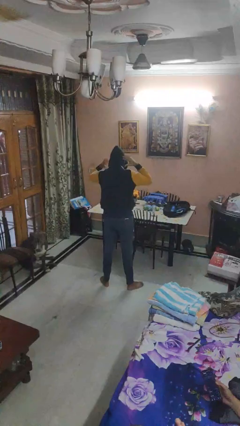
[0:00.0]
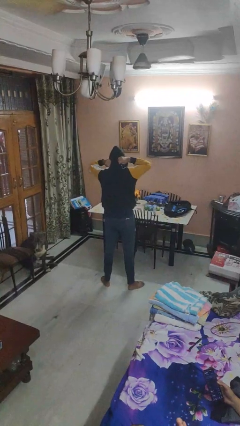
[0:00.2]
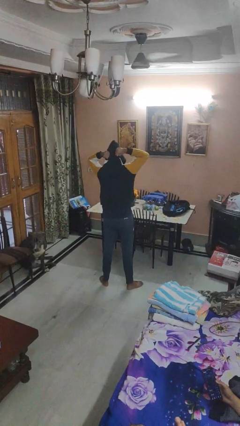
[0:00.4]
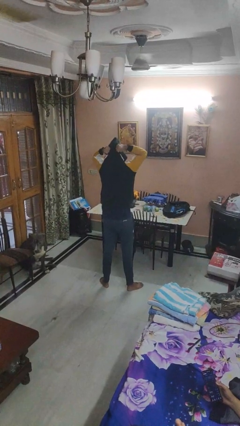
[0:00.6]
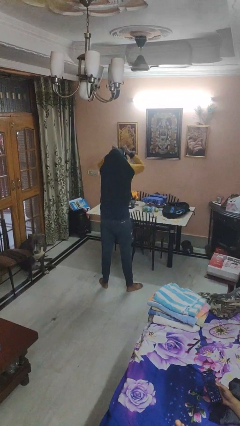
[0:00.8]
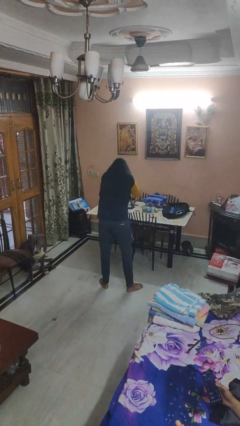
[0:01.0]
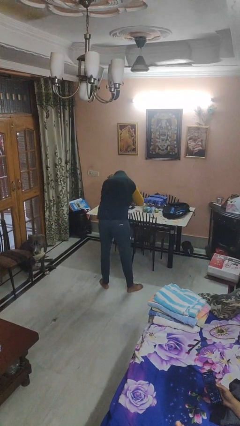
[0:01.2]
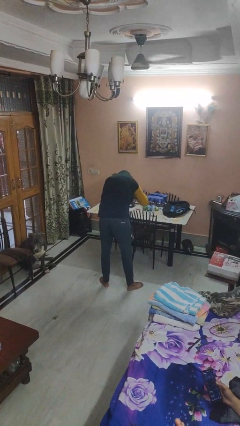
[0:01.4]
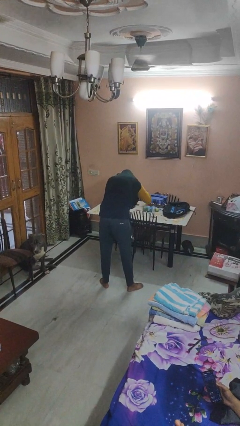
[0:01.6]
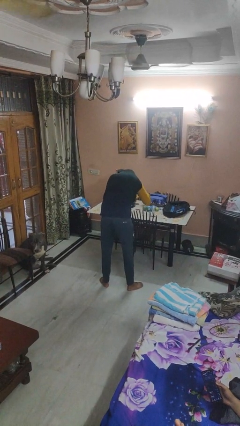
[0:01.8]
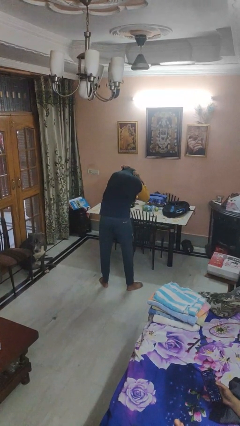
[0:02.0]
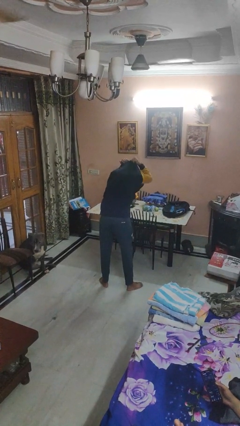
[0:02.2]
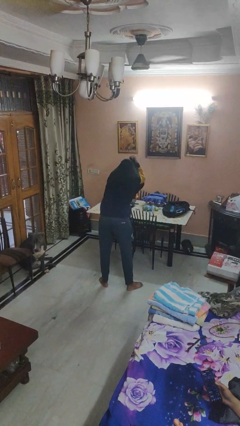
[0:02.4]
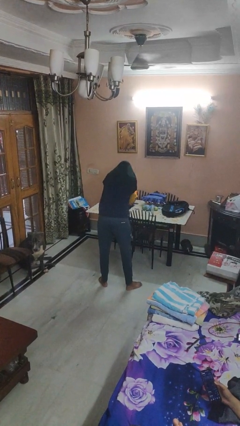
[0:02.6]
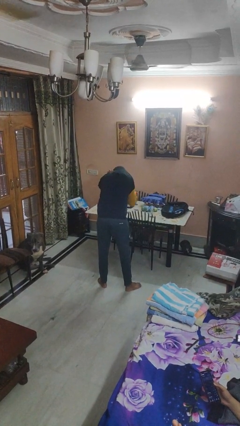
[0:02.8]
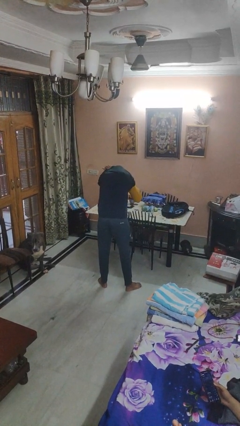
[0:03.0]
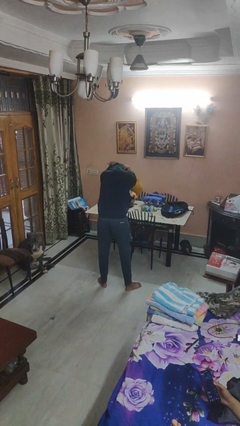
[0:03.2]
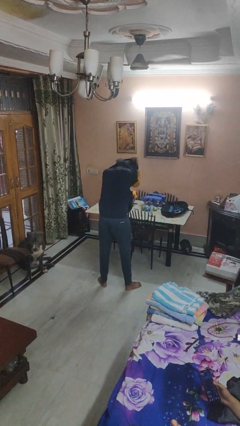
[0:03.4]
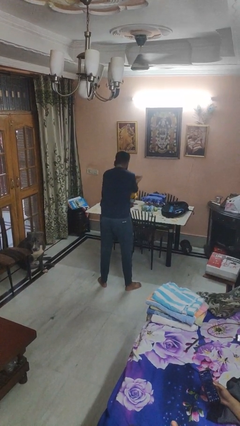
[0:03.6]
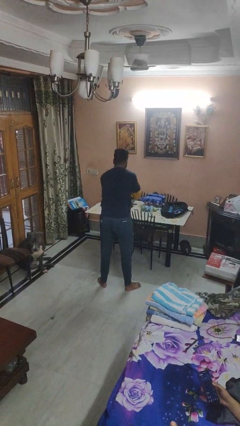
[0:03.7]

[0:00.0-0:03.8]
person takes off hoodie

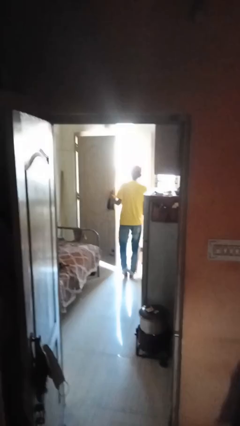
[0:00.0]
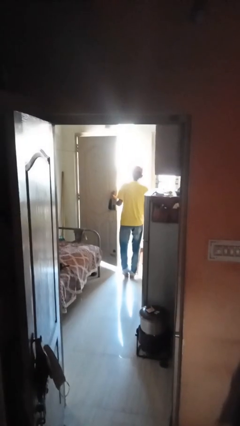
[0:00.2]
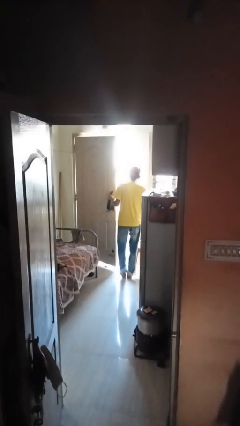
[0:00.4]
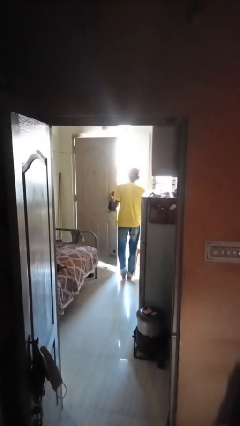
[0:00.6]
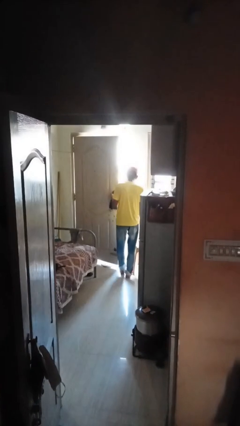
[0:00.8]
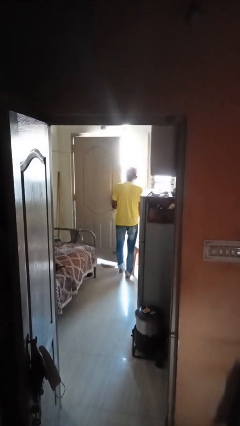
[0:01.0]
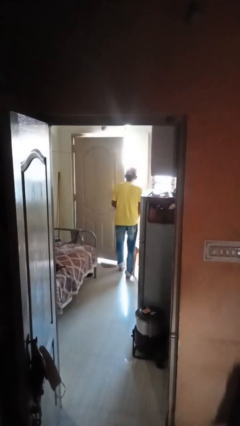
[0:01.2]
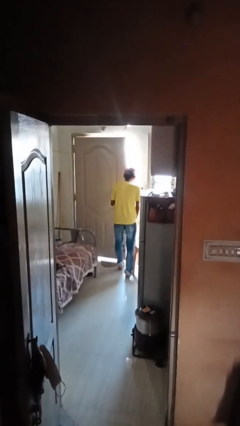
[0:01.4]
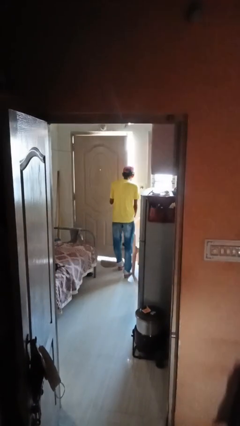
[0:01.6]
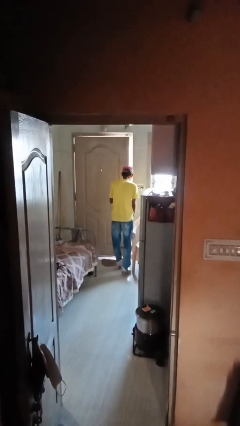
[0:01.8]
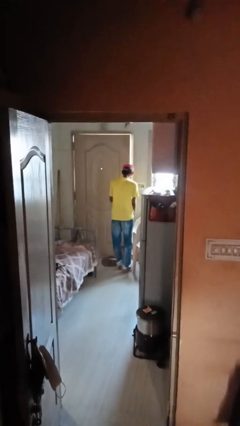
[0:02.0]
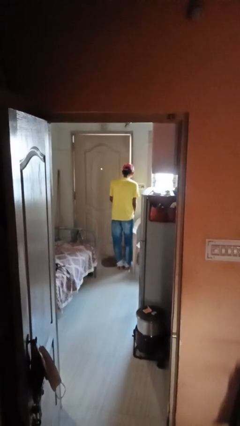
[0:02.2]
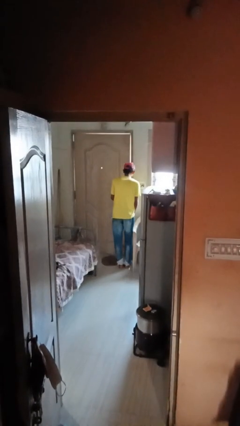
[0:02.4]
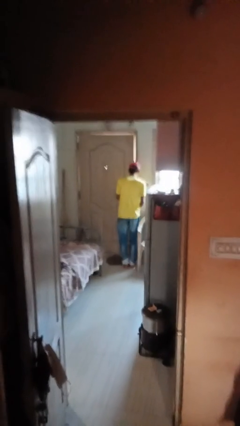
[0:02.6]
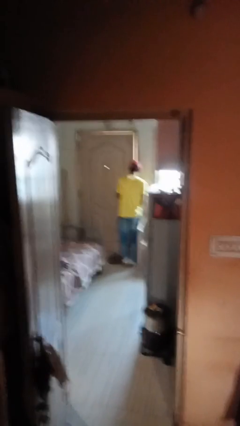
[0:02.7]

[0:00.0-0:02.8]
person closes facility door

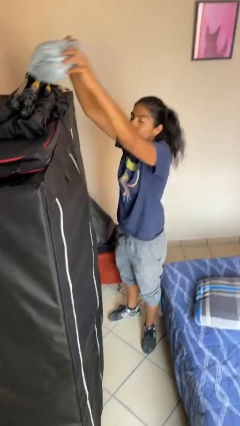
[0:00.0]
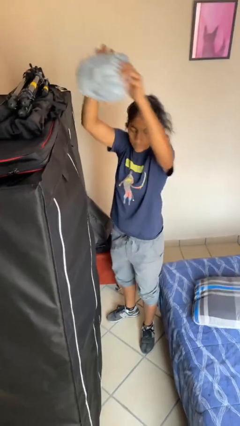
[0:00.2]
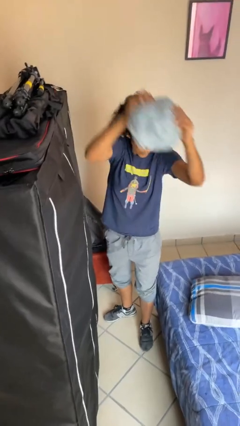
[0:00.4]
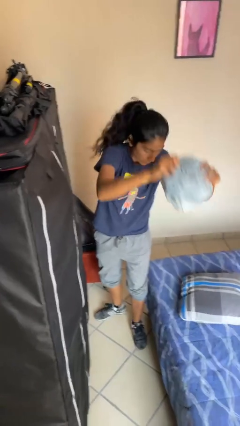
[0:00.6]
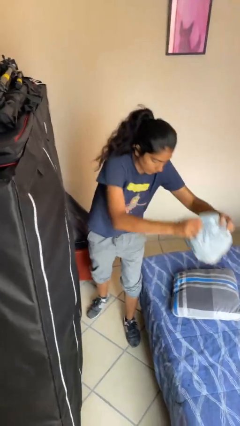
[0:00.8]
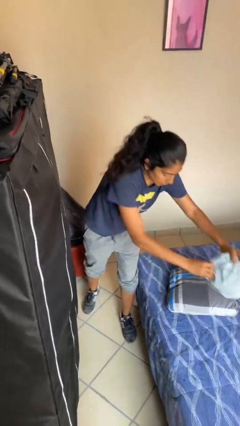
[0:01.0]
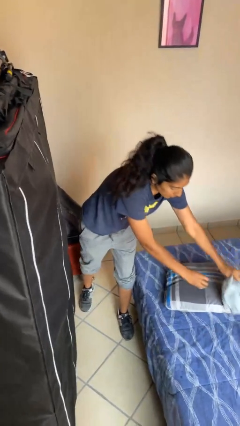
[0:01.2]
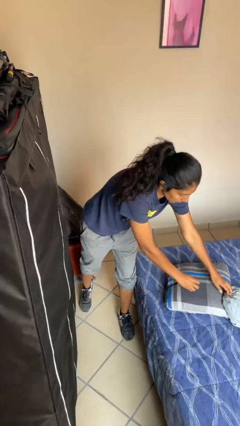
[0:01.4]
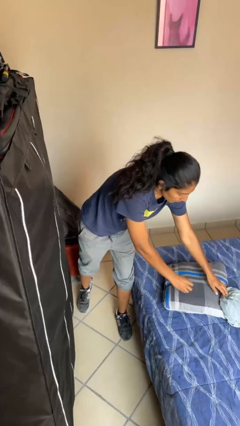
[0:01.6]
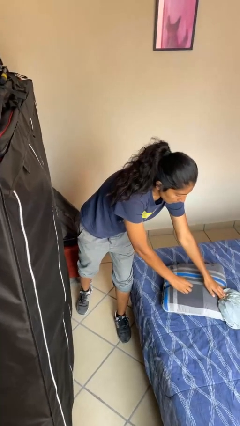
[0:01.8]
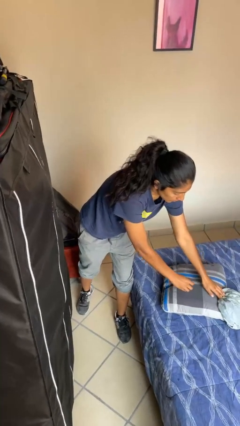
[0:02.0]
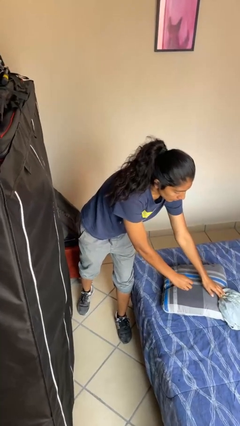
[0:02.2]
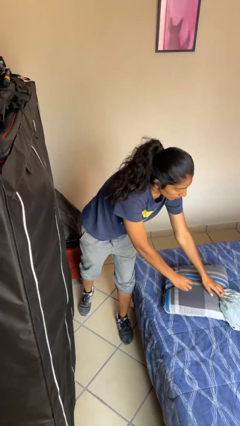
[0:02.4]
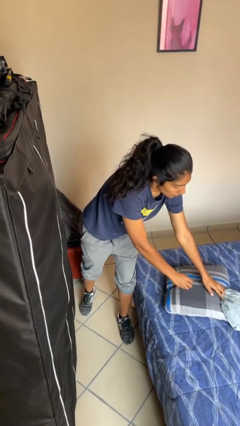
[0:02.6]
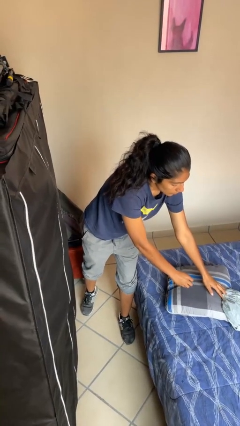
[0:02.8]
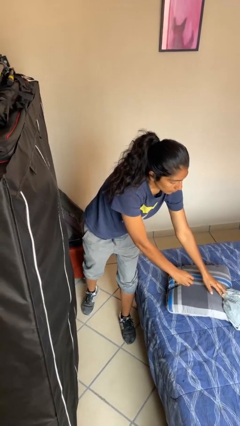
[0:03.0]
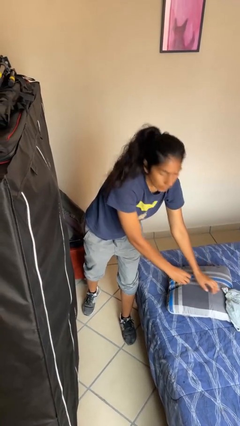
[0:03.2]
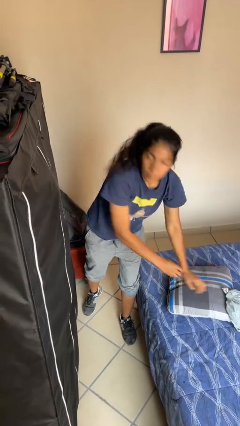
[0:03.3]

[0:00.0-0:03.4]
person puts down object on shelf

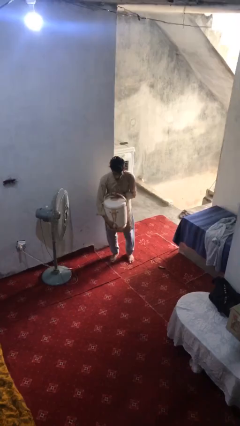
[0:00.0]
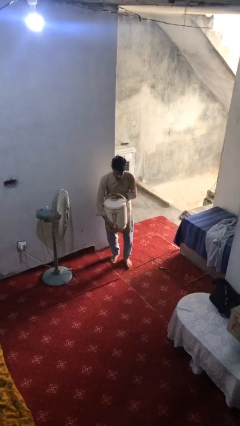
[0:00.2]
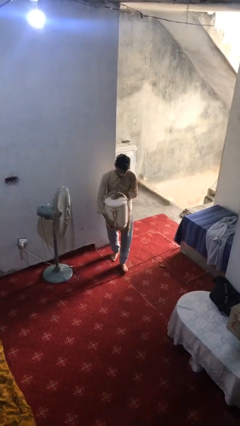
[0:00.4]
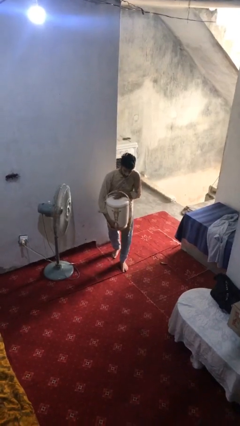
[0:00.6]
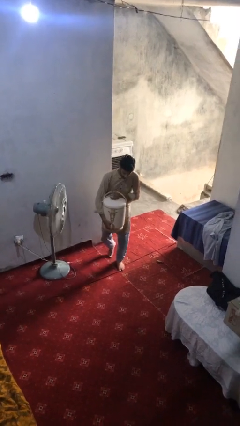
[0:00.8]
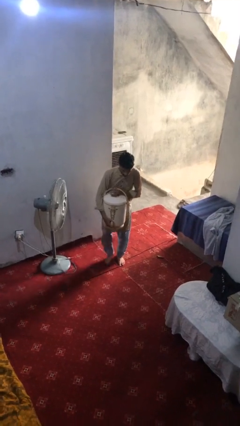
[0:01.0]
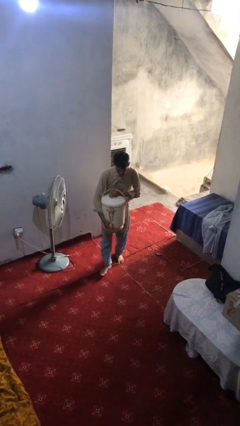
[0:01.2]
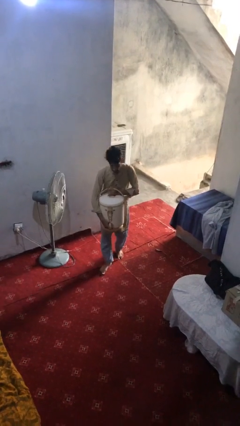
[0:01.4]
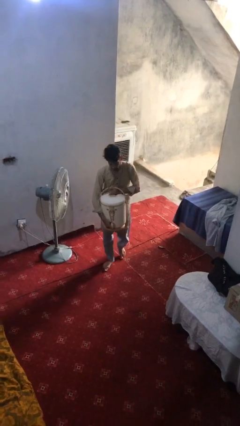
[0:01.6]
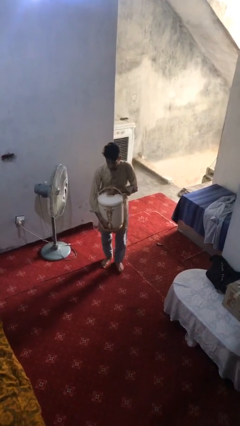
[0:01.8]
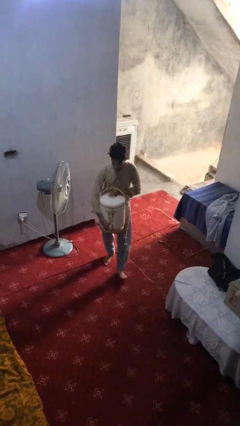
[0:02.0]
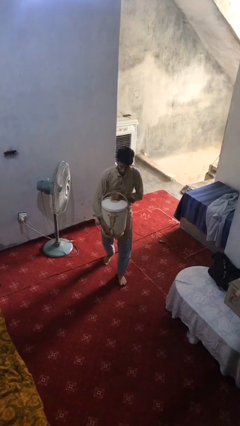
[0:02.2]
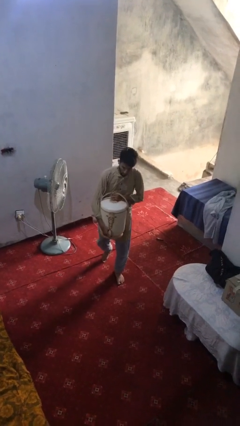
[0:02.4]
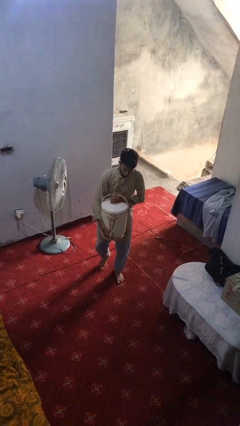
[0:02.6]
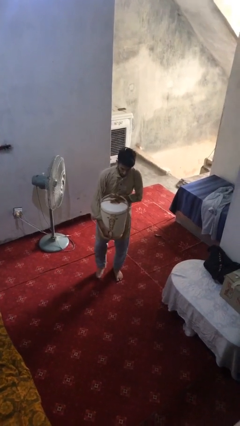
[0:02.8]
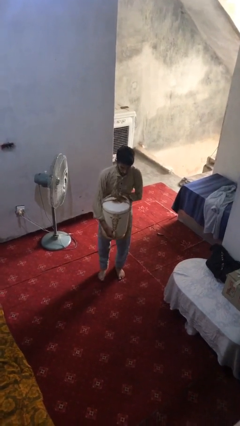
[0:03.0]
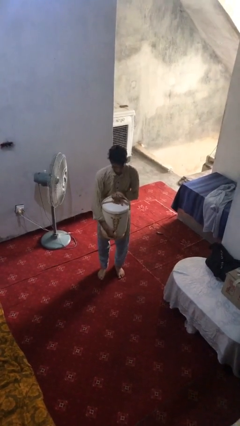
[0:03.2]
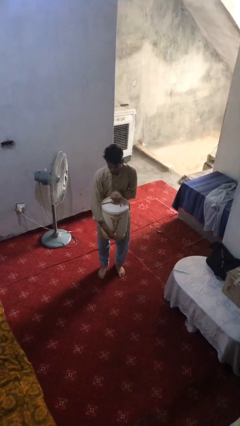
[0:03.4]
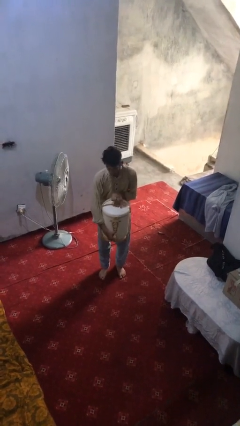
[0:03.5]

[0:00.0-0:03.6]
person carries heavy object

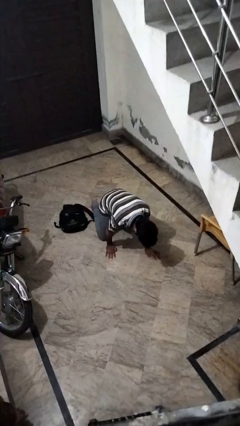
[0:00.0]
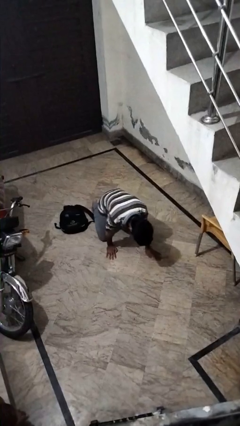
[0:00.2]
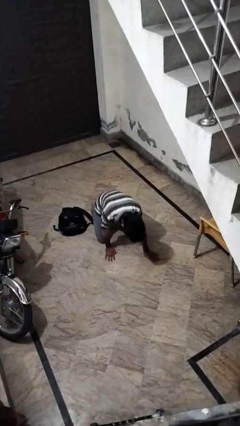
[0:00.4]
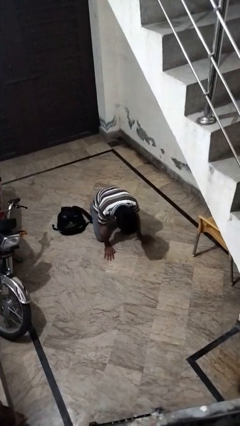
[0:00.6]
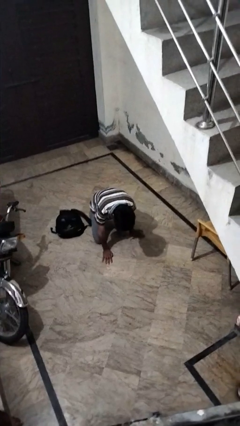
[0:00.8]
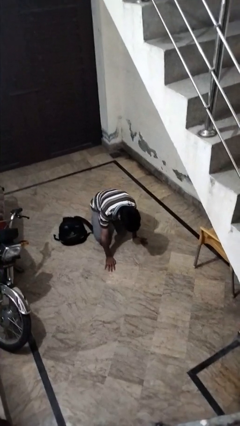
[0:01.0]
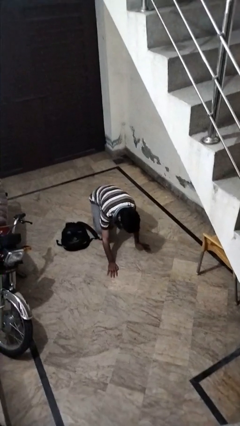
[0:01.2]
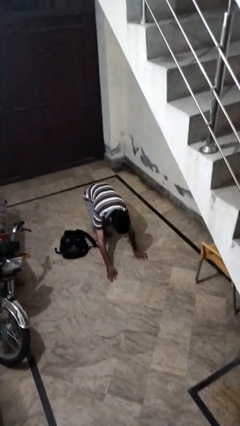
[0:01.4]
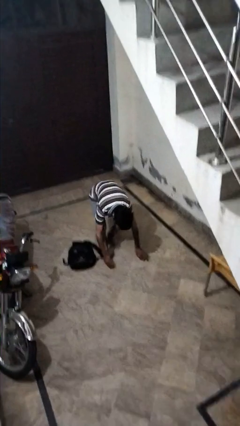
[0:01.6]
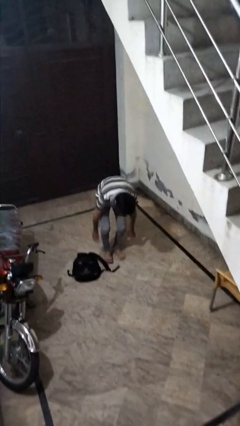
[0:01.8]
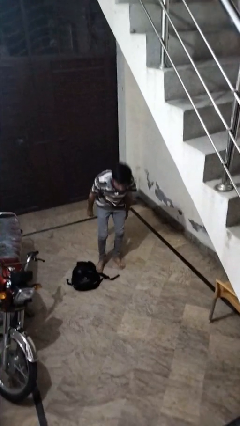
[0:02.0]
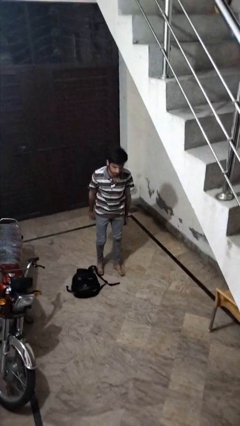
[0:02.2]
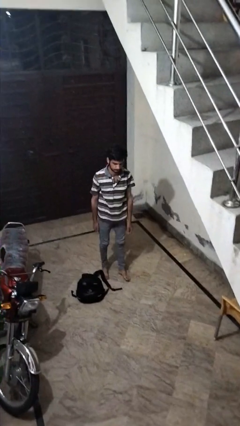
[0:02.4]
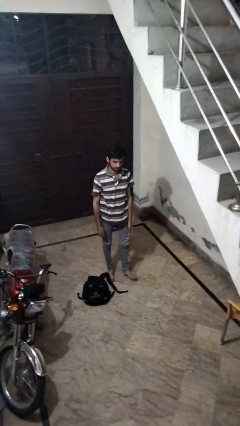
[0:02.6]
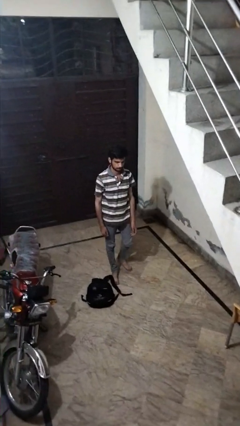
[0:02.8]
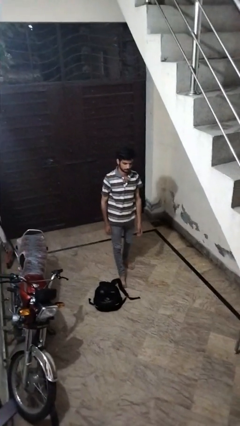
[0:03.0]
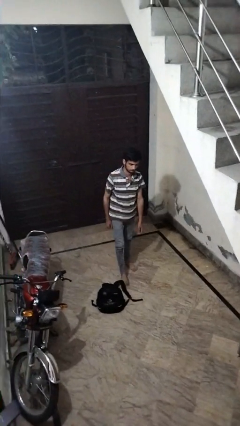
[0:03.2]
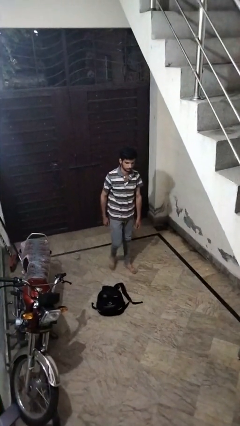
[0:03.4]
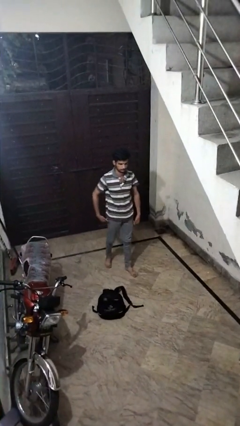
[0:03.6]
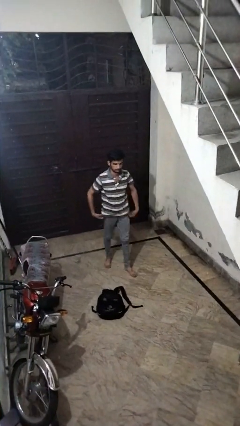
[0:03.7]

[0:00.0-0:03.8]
person stands up from floor
